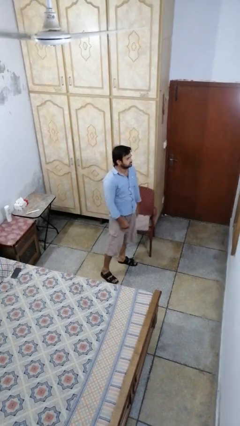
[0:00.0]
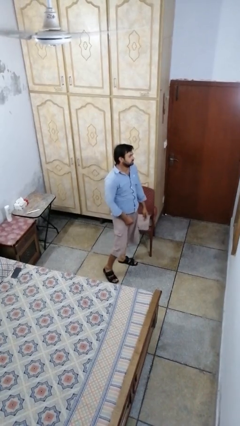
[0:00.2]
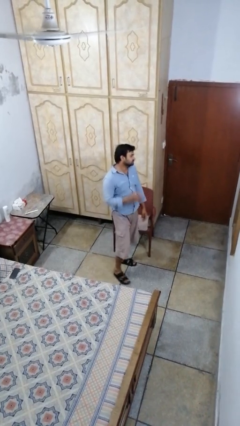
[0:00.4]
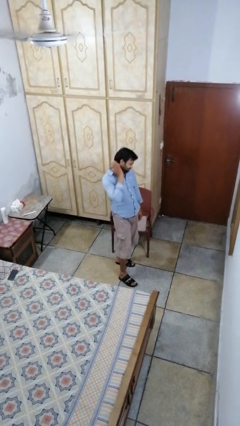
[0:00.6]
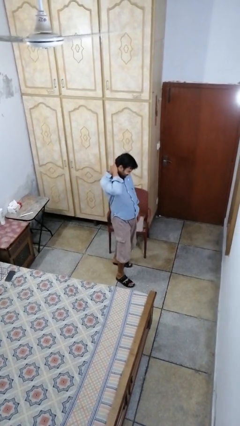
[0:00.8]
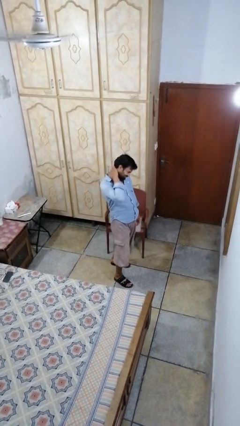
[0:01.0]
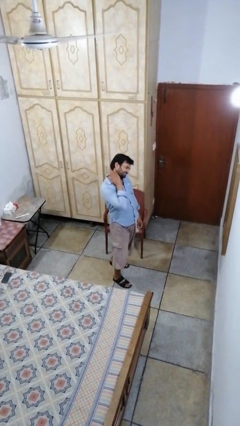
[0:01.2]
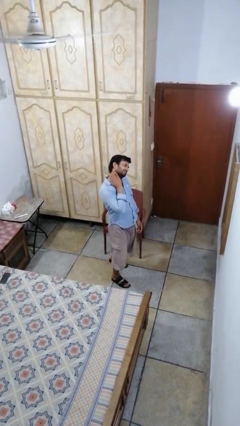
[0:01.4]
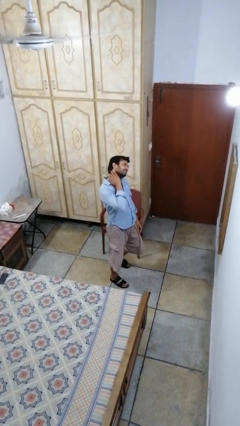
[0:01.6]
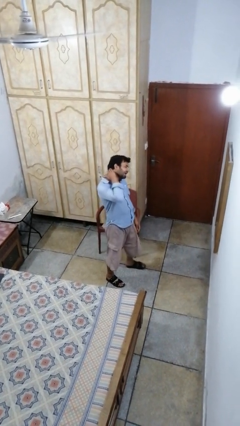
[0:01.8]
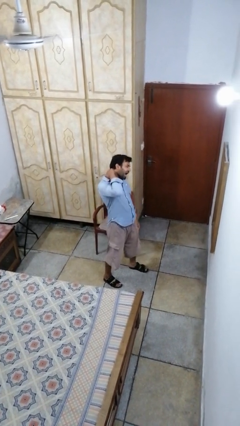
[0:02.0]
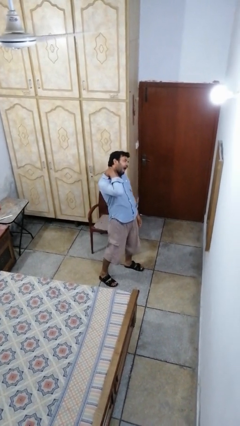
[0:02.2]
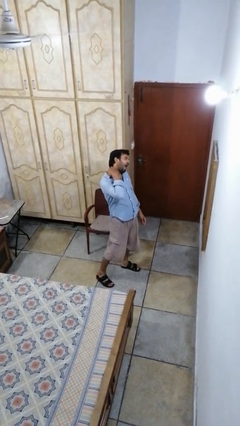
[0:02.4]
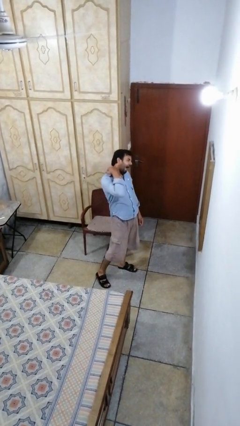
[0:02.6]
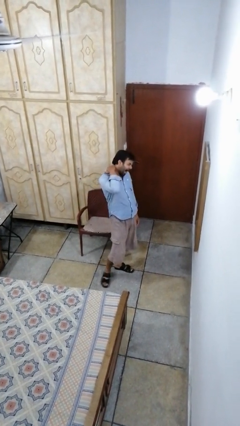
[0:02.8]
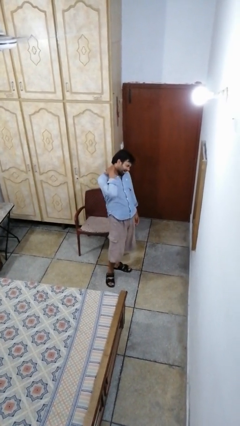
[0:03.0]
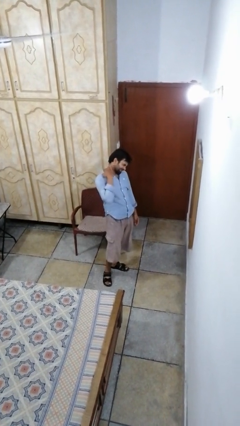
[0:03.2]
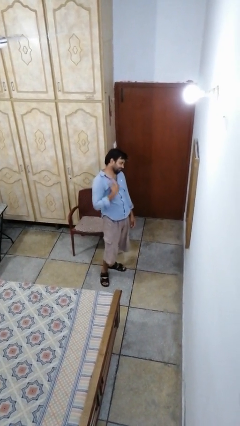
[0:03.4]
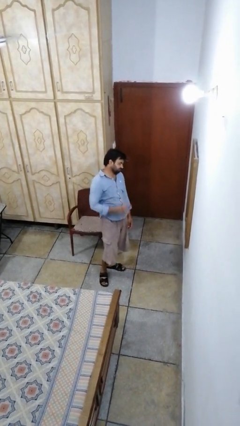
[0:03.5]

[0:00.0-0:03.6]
person rubs neck

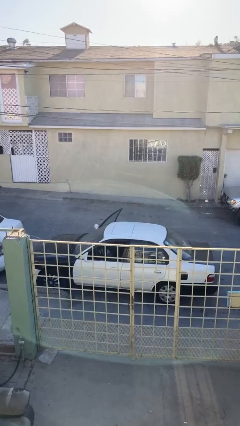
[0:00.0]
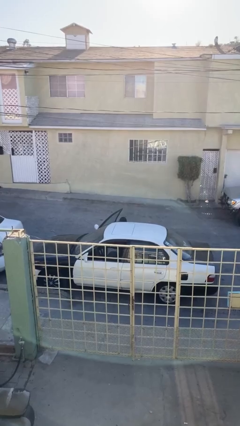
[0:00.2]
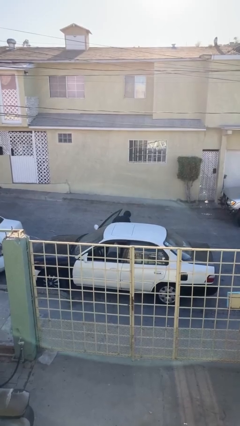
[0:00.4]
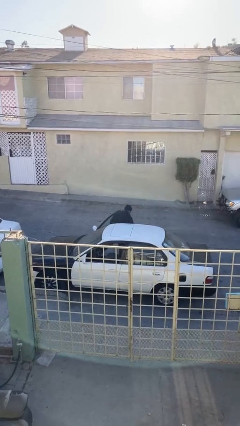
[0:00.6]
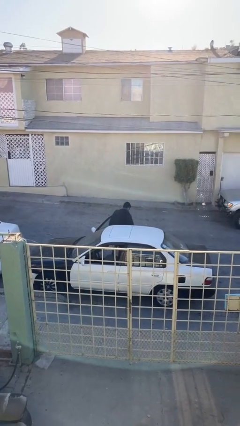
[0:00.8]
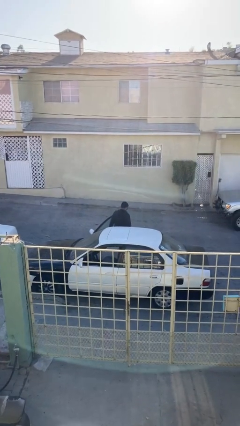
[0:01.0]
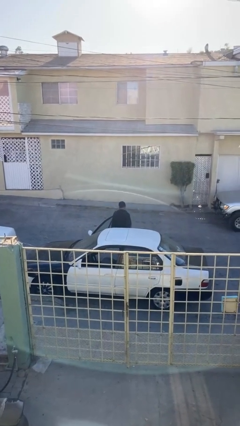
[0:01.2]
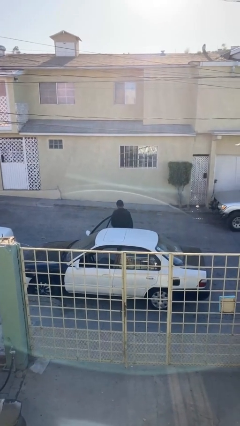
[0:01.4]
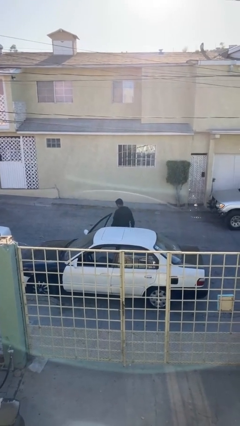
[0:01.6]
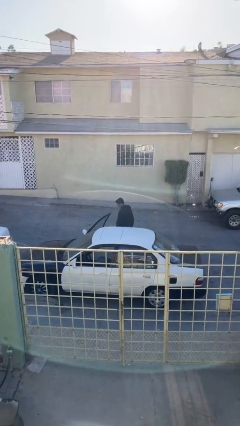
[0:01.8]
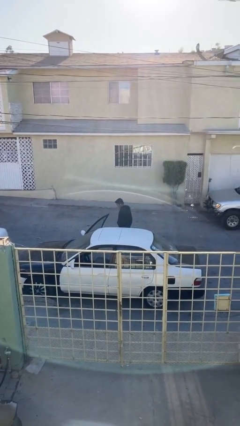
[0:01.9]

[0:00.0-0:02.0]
person exits car

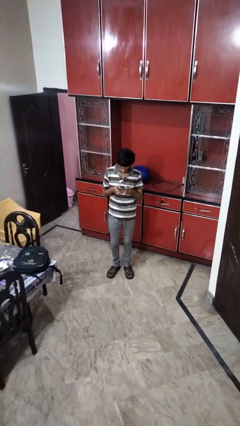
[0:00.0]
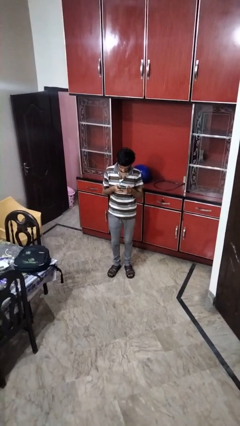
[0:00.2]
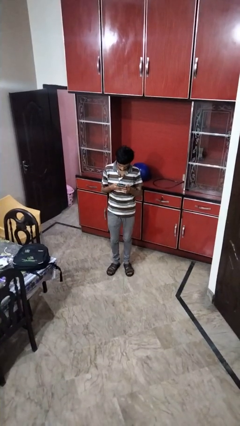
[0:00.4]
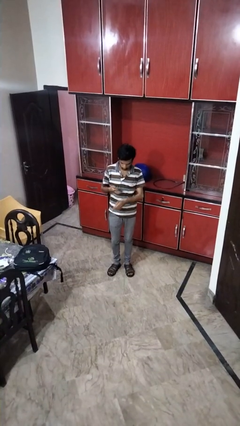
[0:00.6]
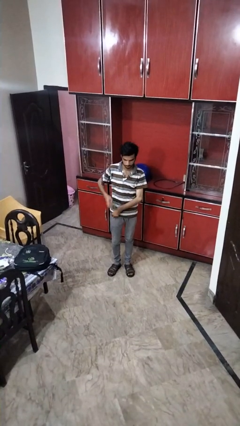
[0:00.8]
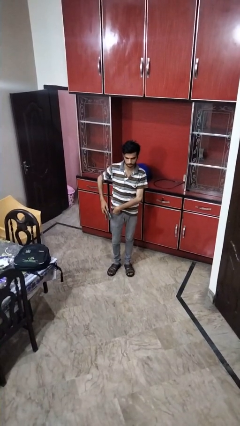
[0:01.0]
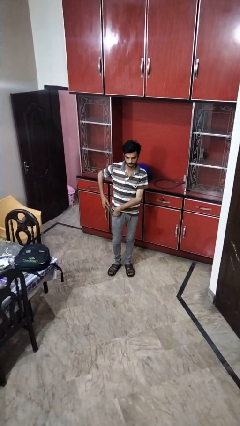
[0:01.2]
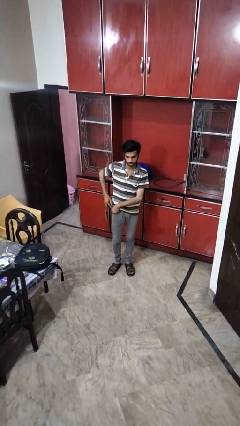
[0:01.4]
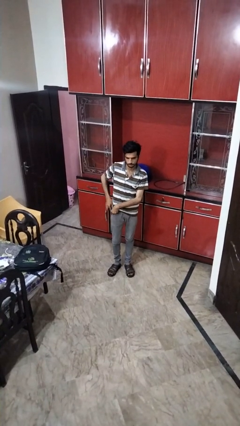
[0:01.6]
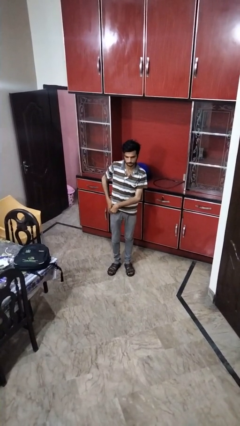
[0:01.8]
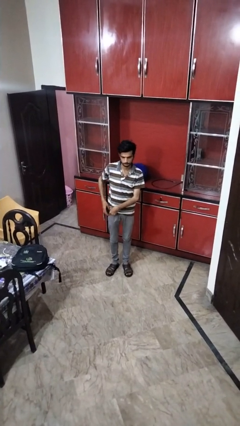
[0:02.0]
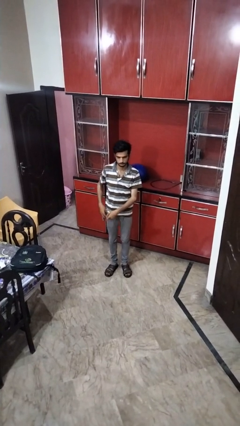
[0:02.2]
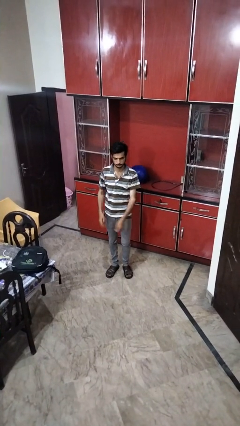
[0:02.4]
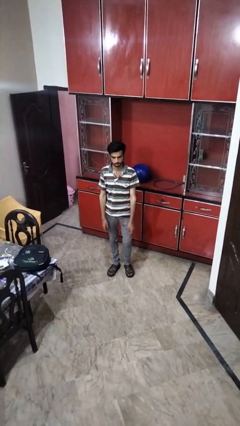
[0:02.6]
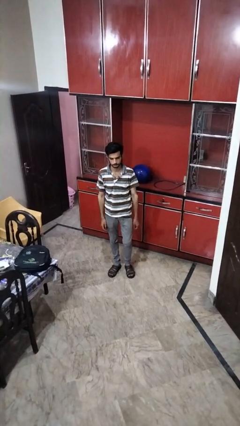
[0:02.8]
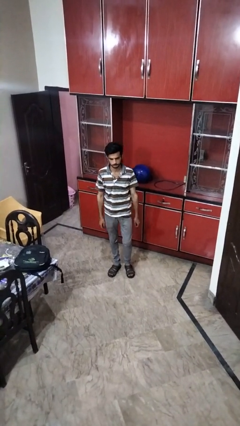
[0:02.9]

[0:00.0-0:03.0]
person puts phone into pocket

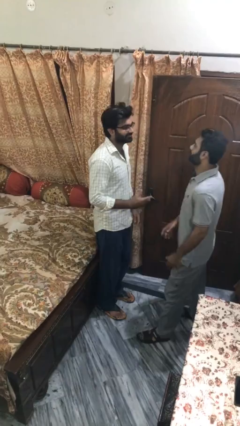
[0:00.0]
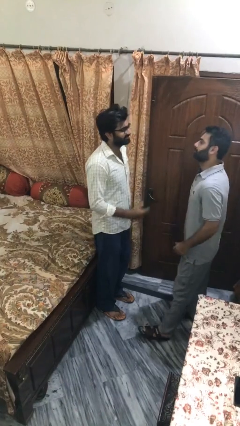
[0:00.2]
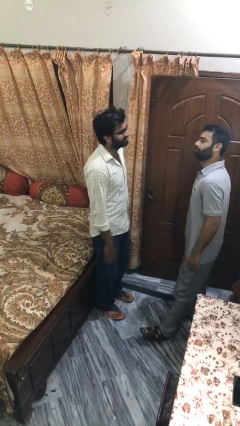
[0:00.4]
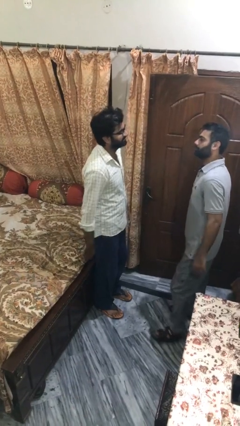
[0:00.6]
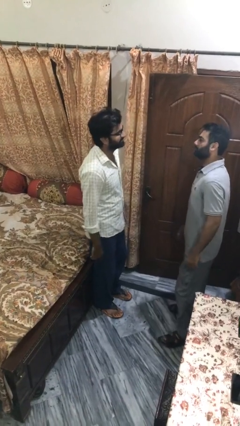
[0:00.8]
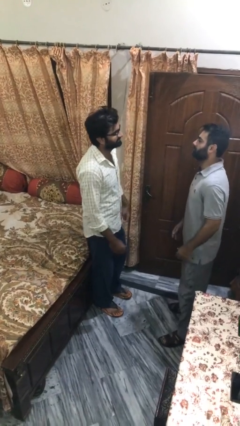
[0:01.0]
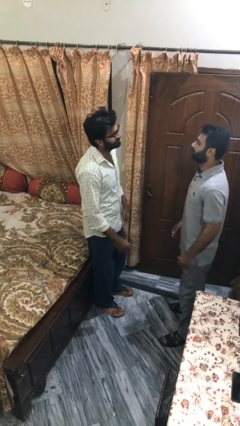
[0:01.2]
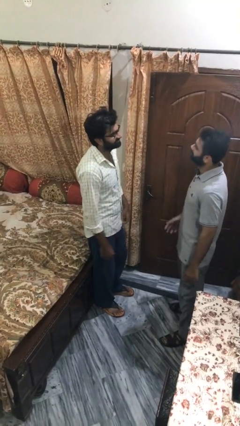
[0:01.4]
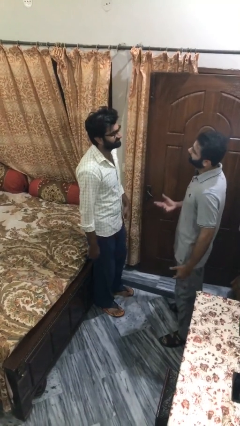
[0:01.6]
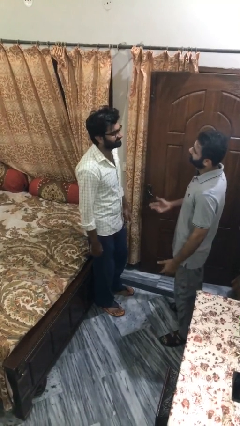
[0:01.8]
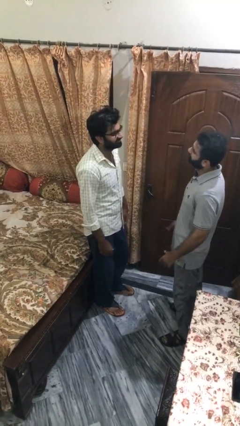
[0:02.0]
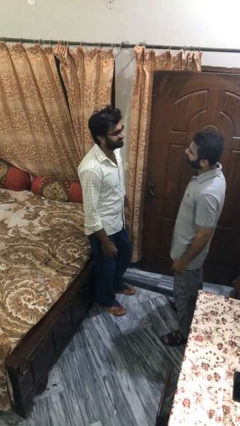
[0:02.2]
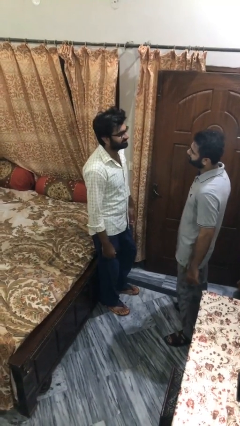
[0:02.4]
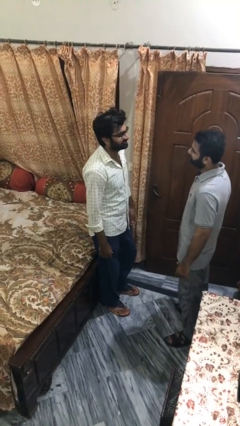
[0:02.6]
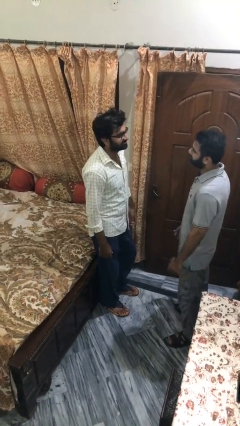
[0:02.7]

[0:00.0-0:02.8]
person talks to person

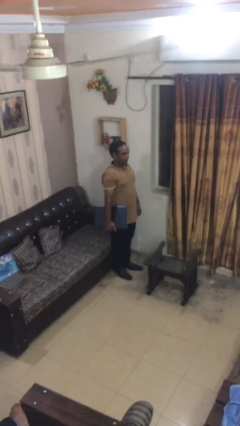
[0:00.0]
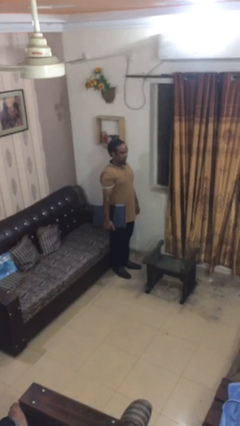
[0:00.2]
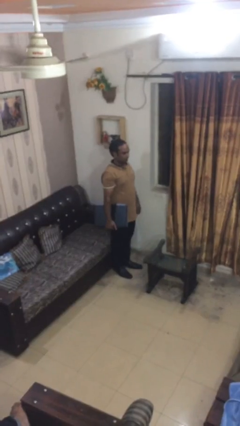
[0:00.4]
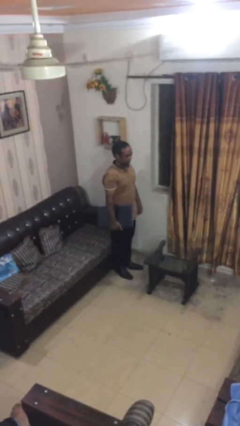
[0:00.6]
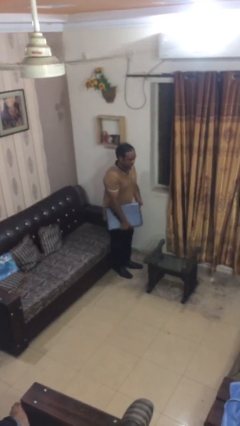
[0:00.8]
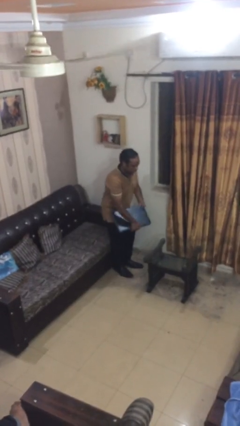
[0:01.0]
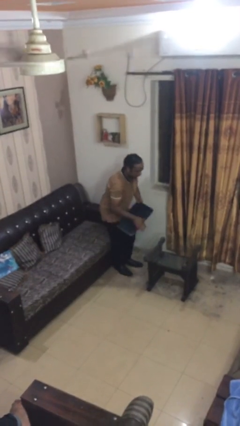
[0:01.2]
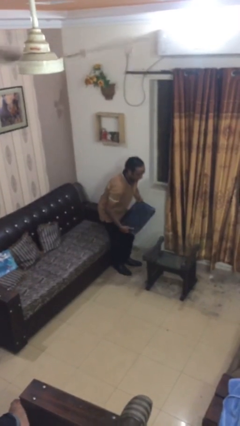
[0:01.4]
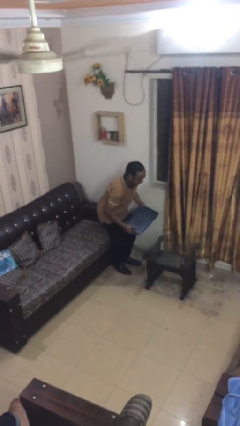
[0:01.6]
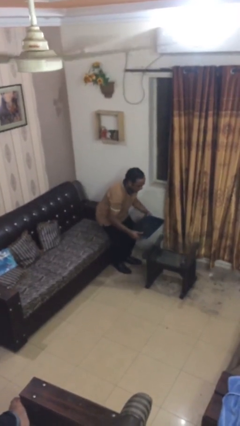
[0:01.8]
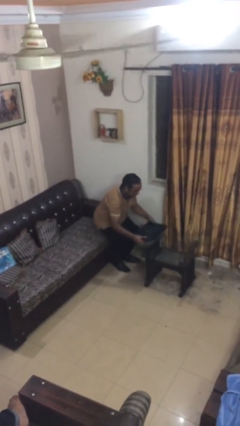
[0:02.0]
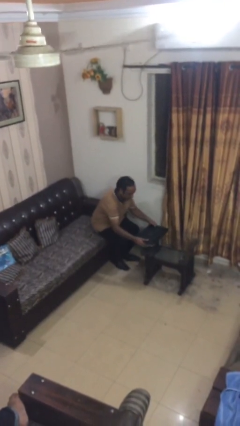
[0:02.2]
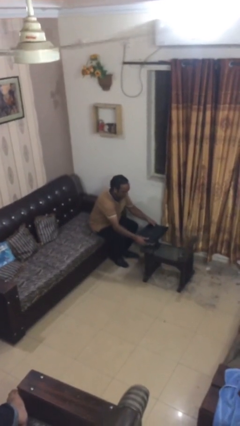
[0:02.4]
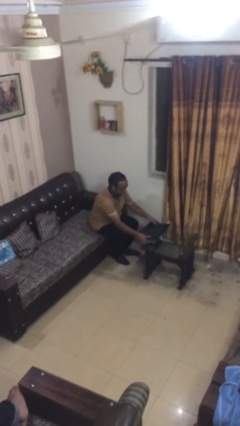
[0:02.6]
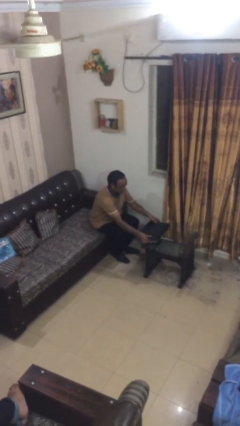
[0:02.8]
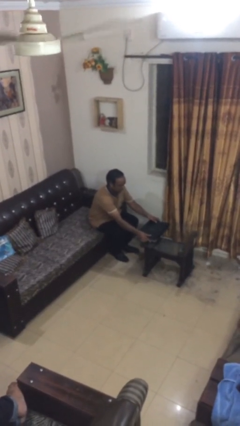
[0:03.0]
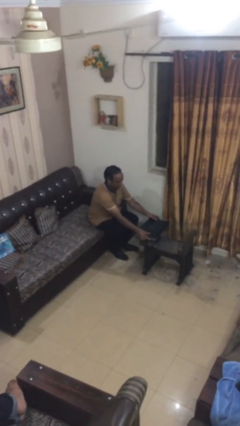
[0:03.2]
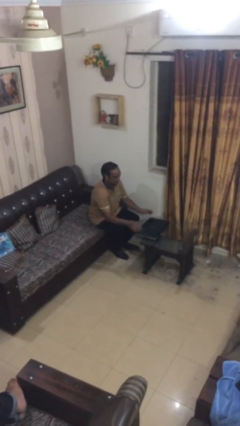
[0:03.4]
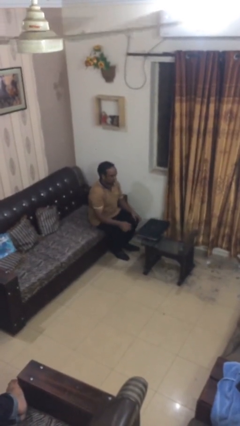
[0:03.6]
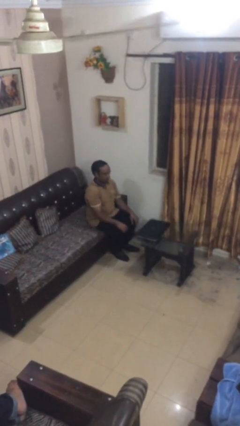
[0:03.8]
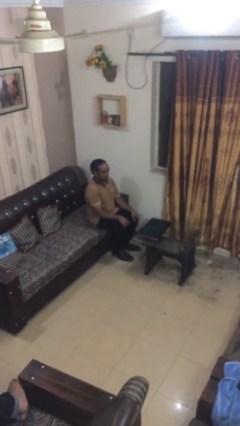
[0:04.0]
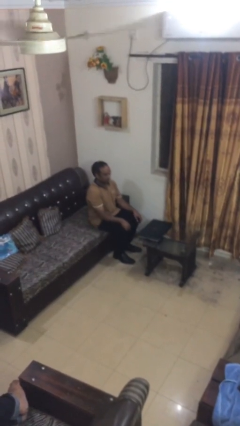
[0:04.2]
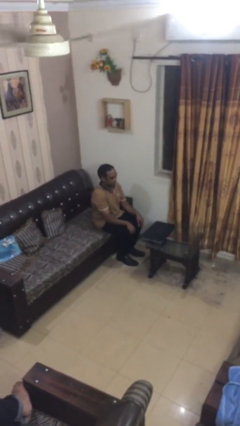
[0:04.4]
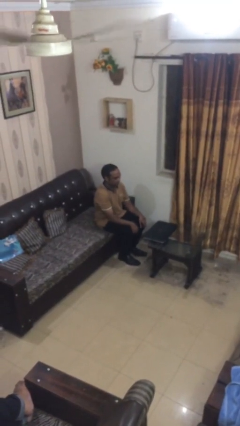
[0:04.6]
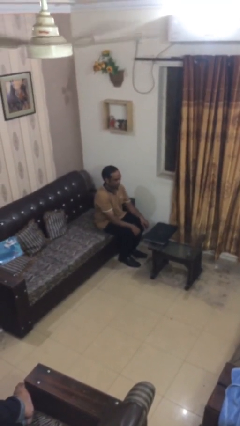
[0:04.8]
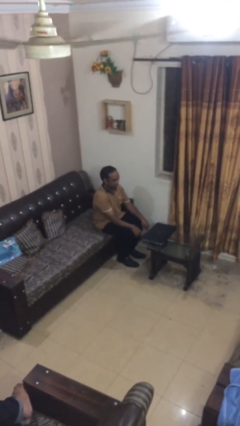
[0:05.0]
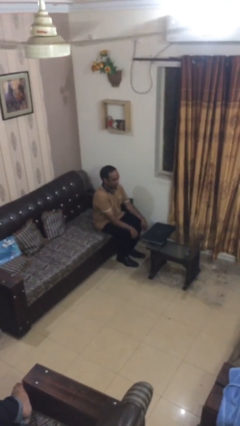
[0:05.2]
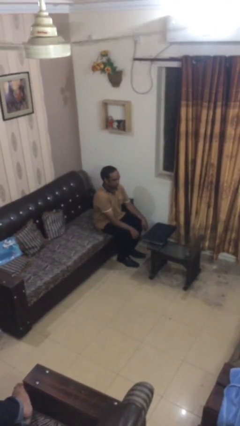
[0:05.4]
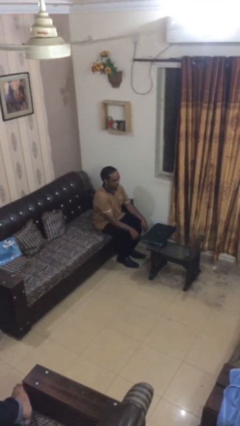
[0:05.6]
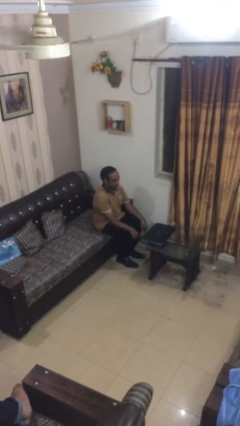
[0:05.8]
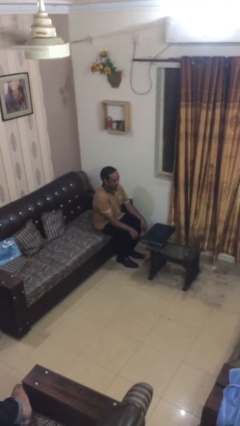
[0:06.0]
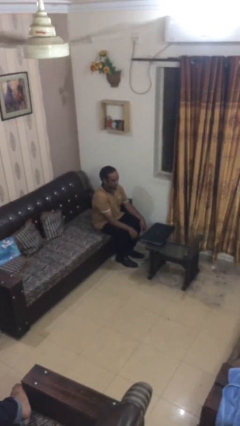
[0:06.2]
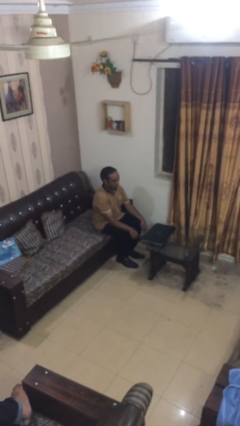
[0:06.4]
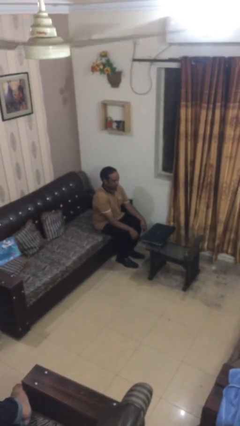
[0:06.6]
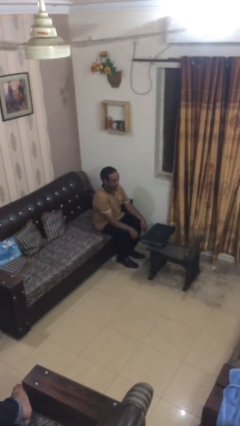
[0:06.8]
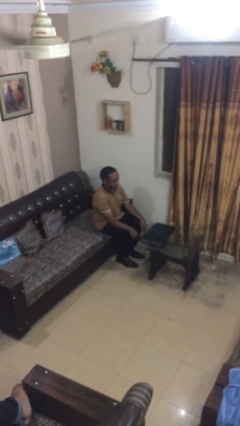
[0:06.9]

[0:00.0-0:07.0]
person sits down
